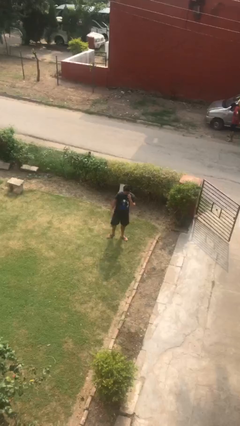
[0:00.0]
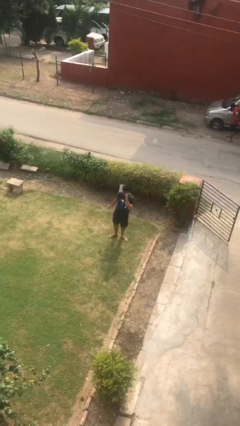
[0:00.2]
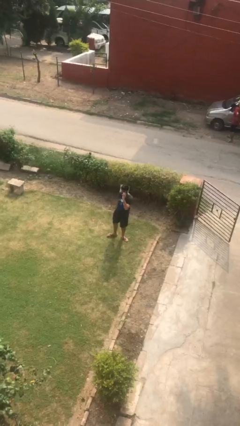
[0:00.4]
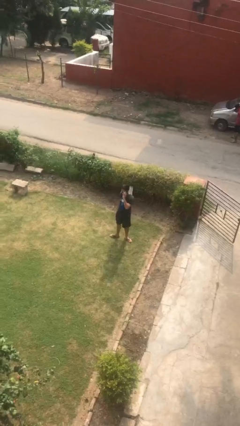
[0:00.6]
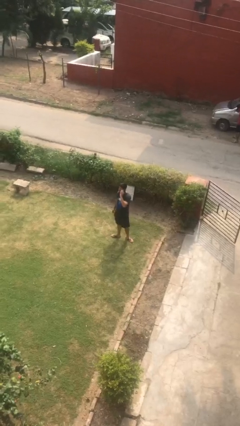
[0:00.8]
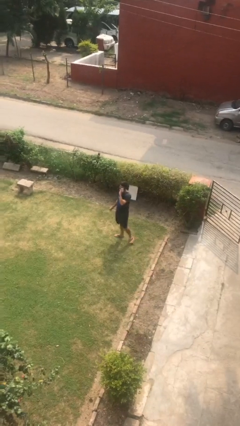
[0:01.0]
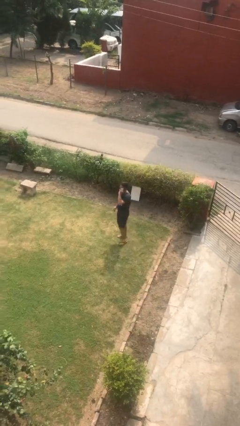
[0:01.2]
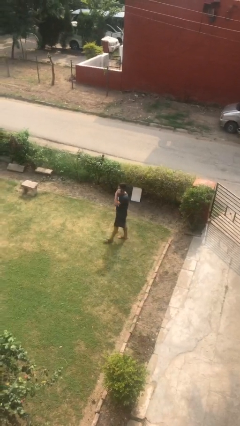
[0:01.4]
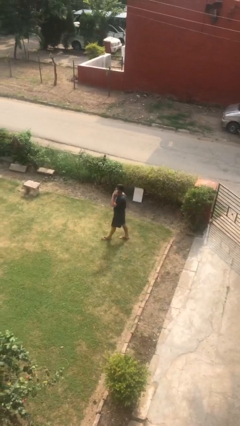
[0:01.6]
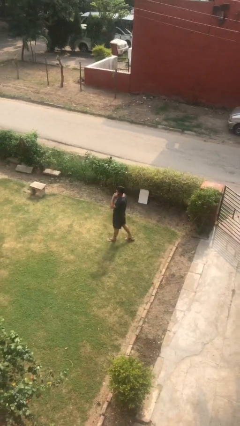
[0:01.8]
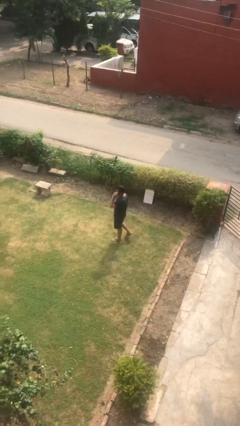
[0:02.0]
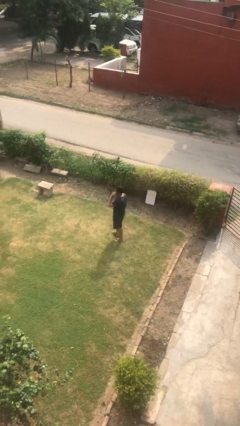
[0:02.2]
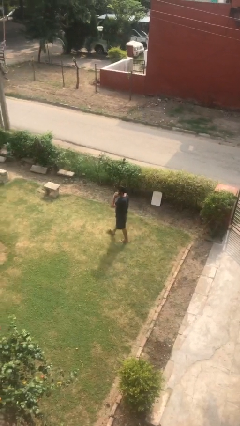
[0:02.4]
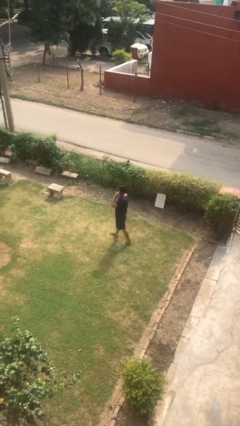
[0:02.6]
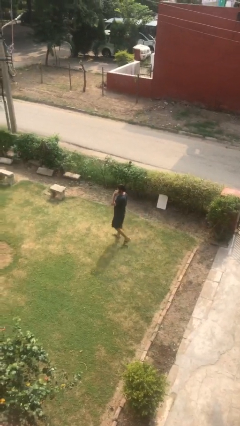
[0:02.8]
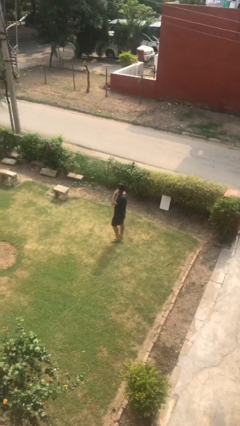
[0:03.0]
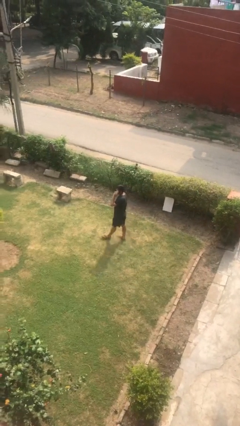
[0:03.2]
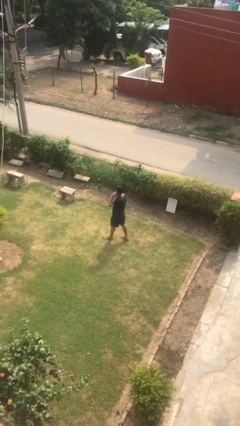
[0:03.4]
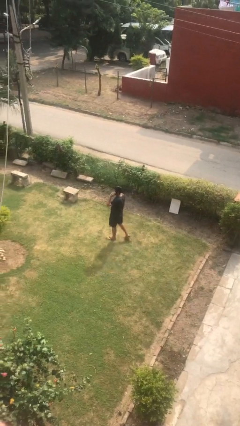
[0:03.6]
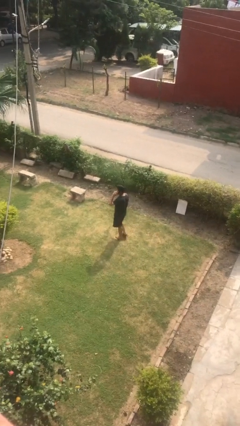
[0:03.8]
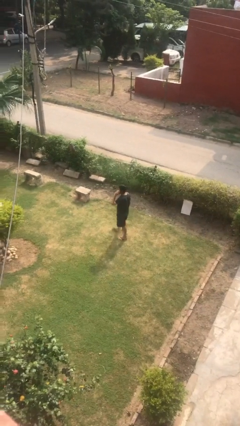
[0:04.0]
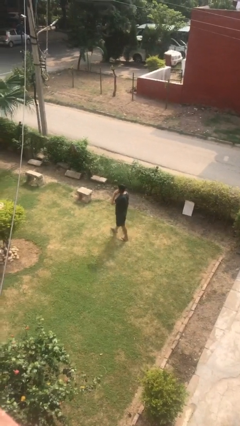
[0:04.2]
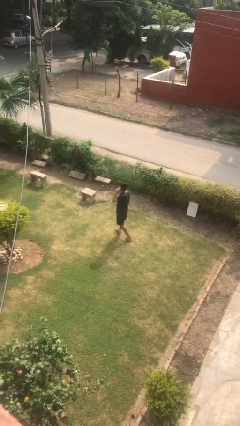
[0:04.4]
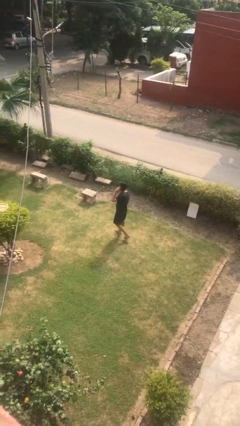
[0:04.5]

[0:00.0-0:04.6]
person talks on phone

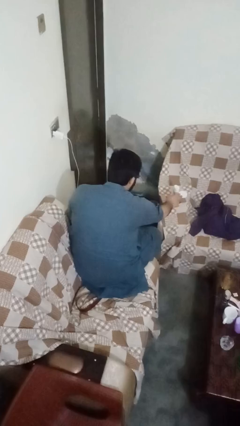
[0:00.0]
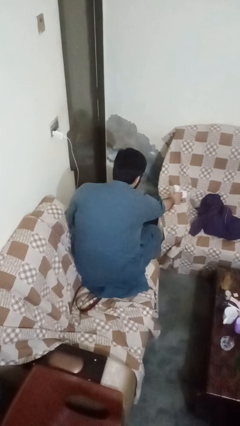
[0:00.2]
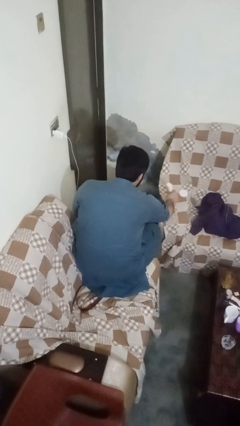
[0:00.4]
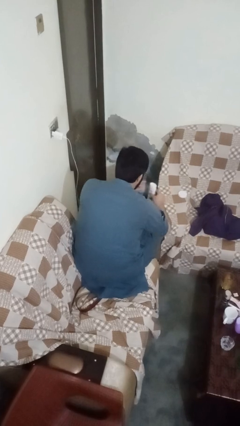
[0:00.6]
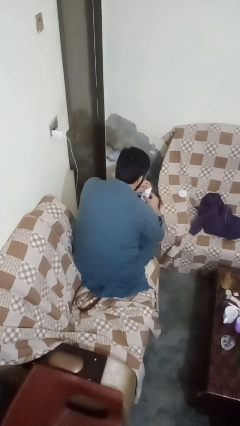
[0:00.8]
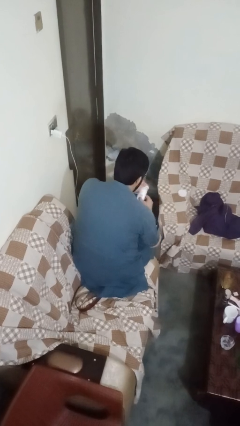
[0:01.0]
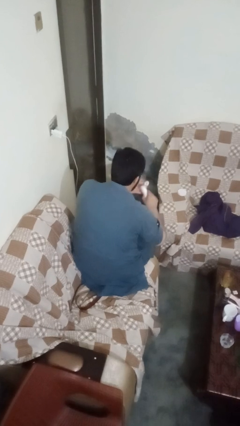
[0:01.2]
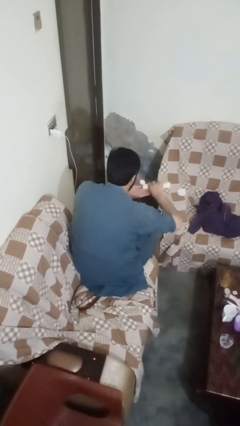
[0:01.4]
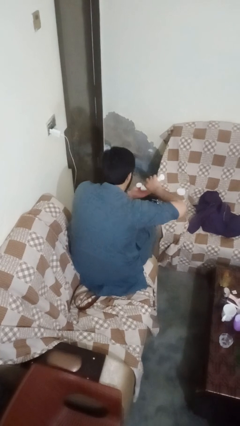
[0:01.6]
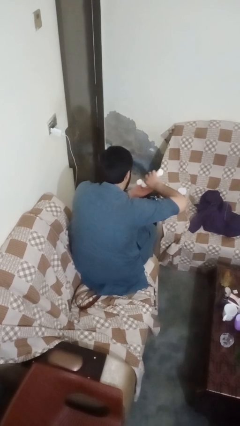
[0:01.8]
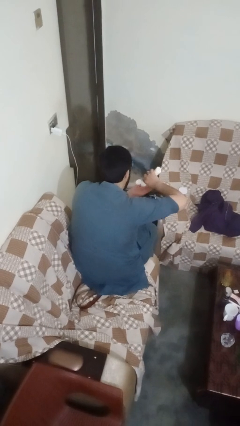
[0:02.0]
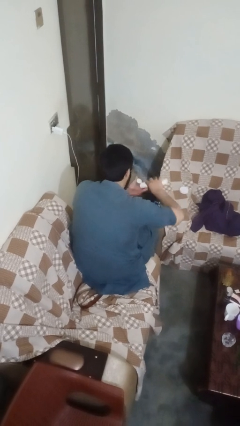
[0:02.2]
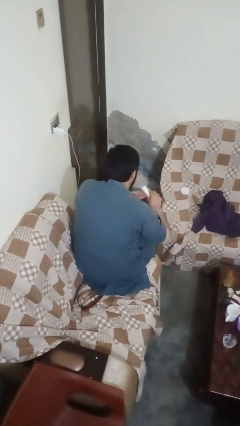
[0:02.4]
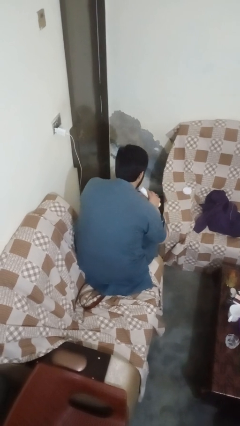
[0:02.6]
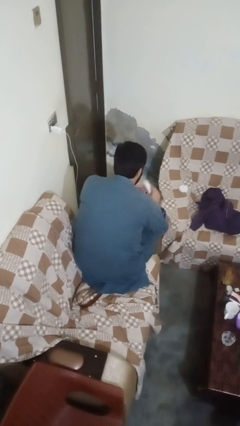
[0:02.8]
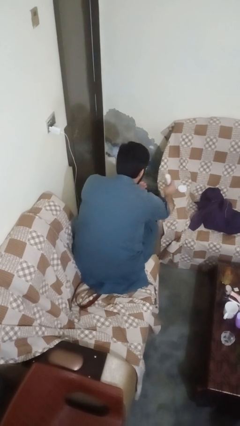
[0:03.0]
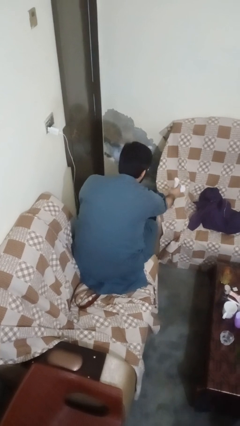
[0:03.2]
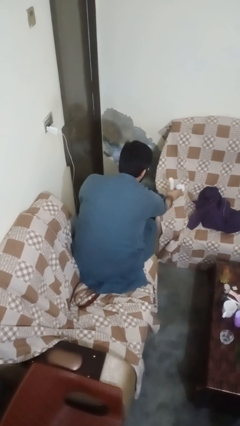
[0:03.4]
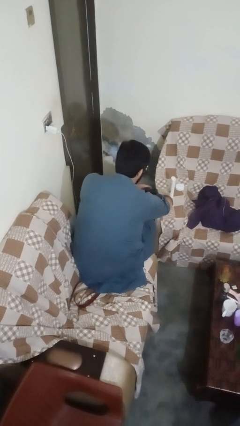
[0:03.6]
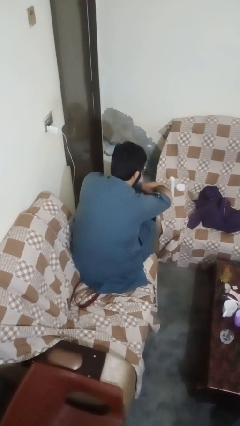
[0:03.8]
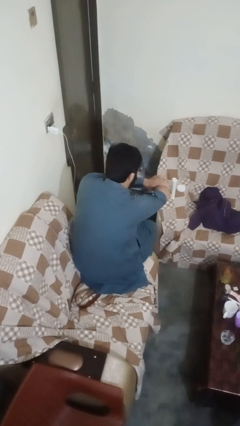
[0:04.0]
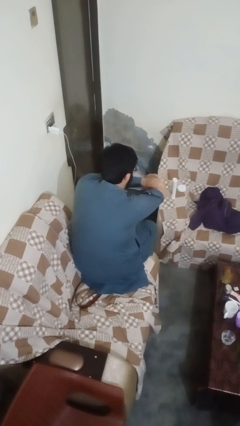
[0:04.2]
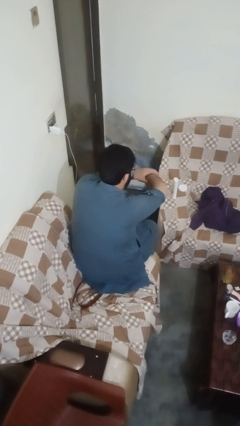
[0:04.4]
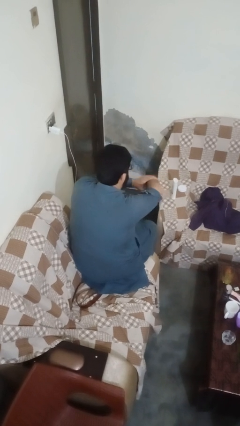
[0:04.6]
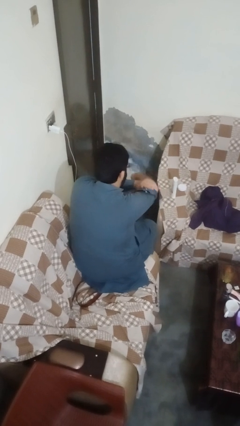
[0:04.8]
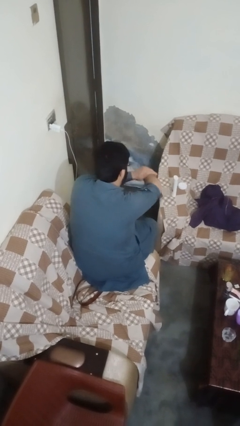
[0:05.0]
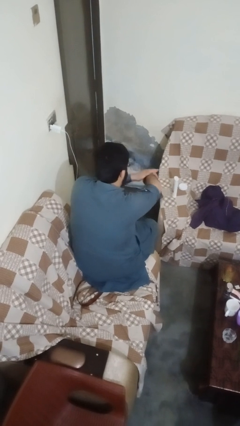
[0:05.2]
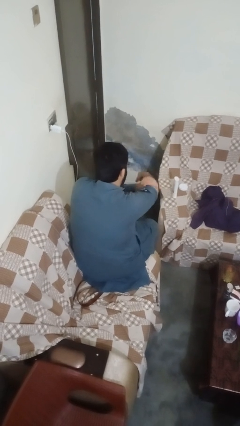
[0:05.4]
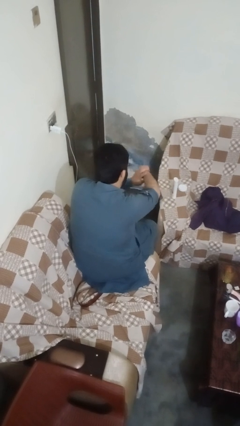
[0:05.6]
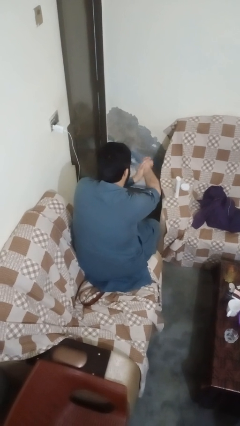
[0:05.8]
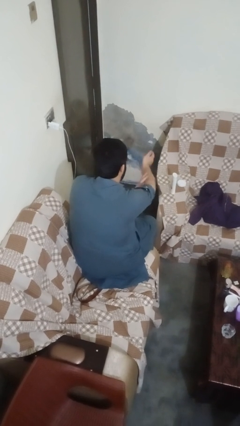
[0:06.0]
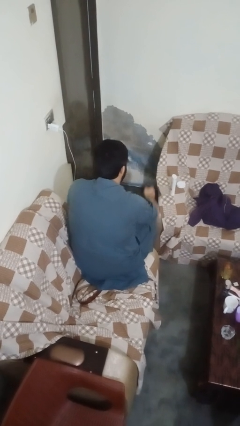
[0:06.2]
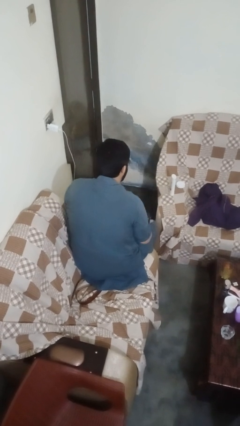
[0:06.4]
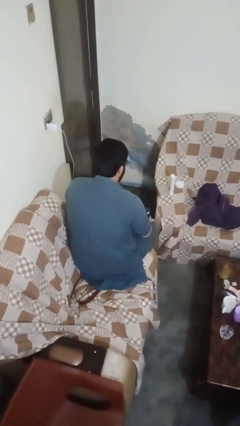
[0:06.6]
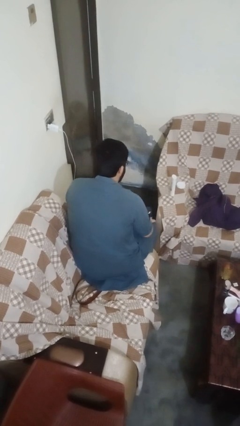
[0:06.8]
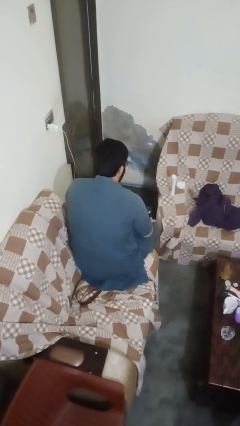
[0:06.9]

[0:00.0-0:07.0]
person applies sunscreen

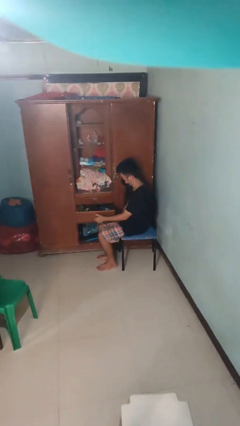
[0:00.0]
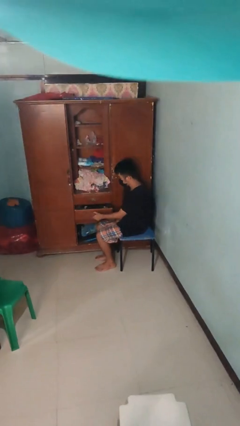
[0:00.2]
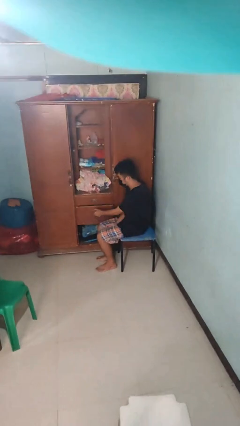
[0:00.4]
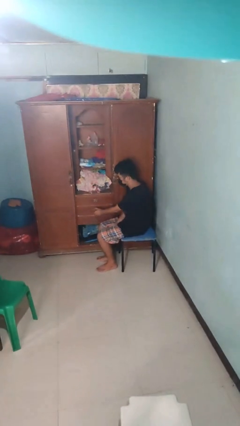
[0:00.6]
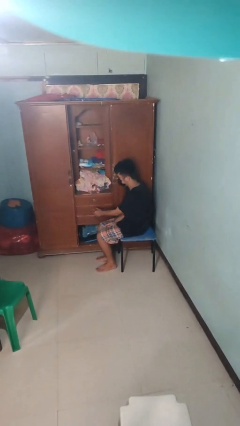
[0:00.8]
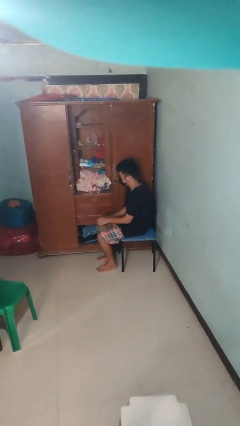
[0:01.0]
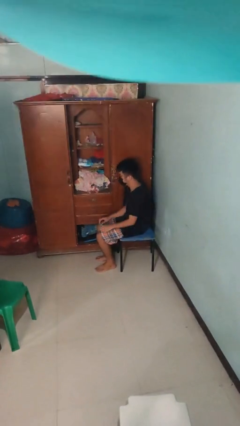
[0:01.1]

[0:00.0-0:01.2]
person closes dresser drawer

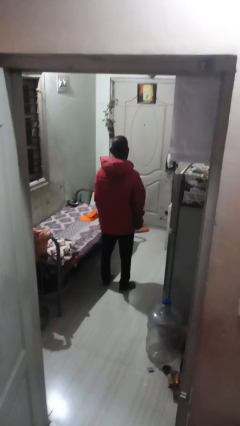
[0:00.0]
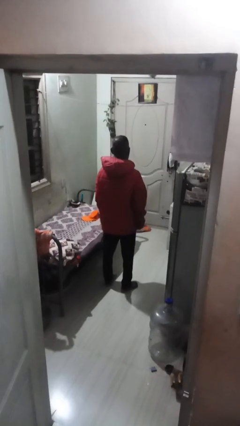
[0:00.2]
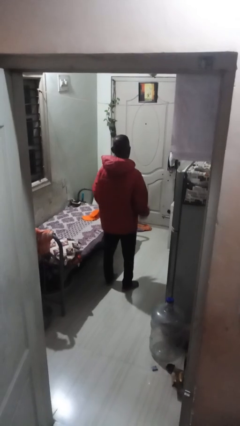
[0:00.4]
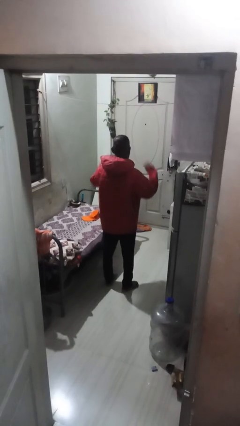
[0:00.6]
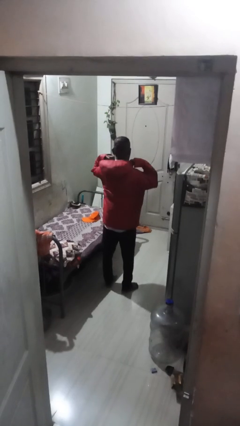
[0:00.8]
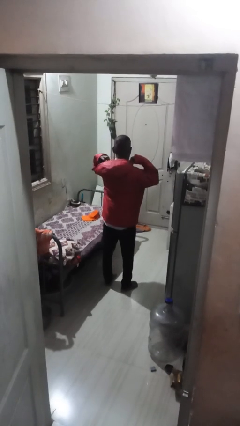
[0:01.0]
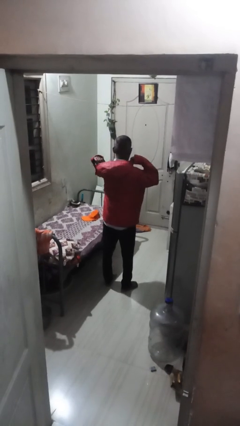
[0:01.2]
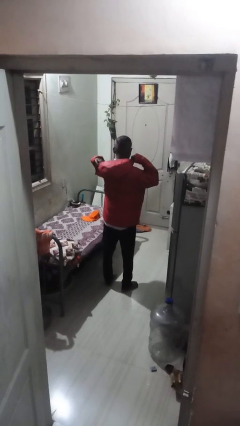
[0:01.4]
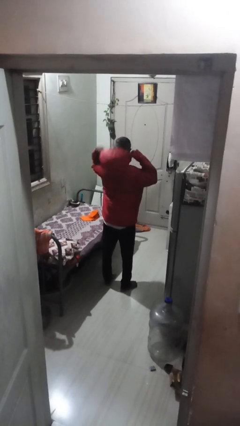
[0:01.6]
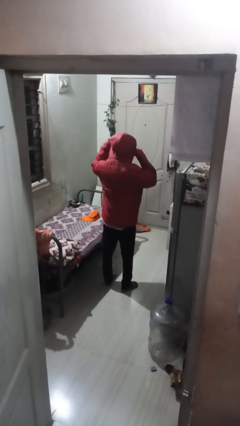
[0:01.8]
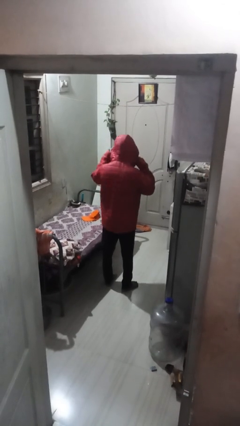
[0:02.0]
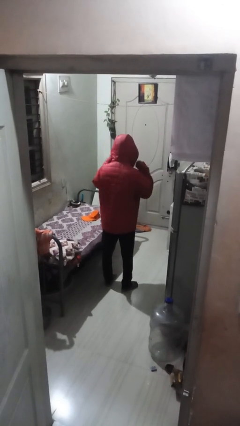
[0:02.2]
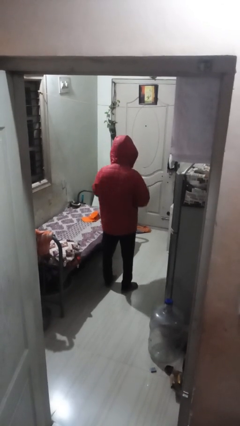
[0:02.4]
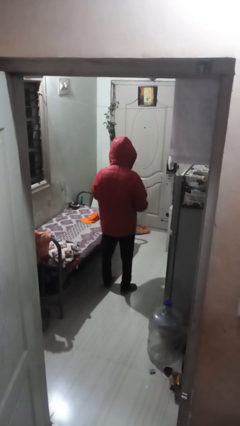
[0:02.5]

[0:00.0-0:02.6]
person puts on hoodie

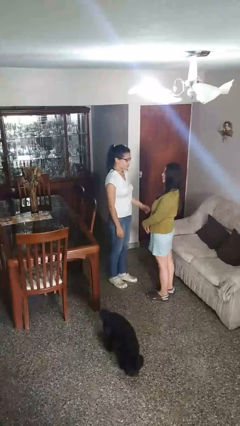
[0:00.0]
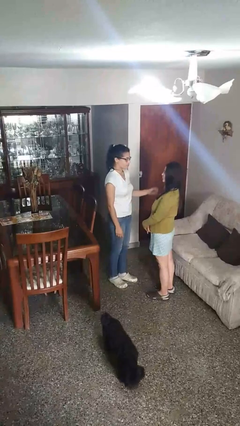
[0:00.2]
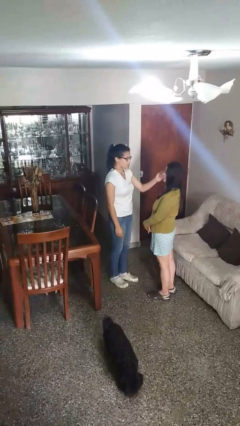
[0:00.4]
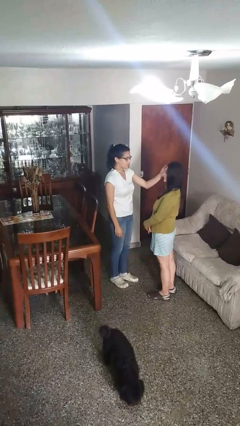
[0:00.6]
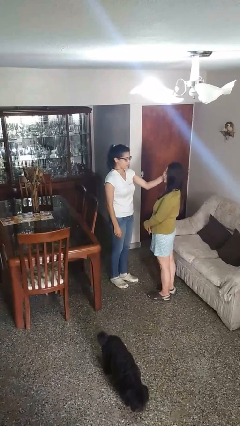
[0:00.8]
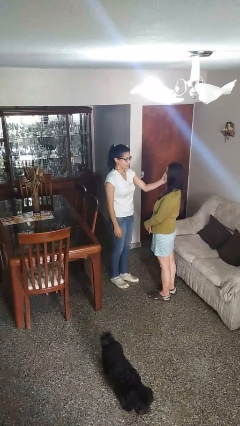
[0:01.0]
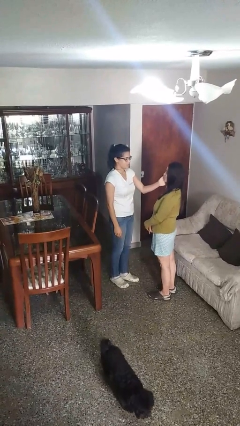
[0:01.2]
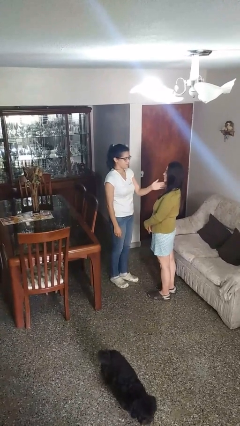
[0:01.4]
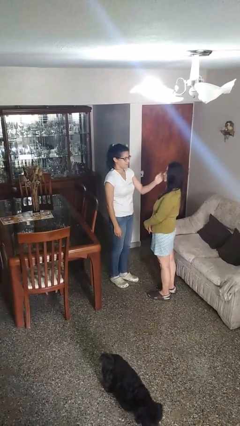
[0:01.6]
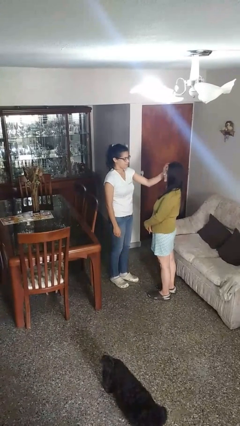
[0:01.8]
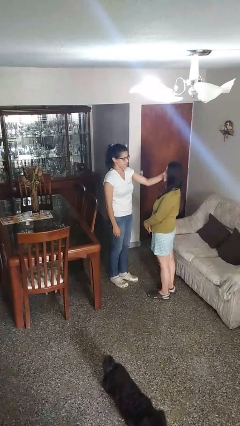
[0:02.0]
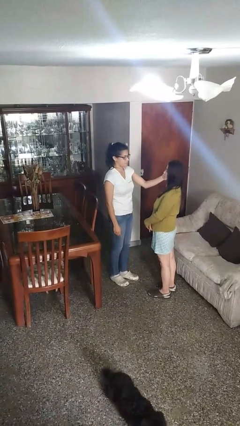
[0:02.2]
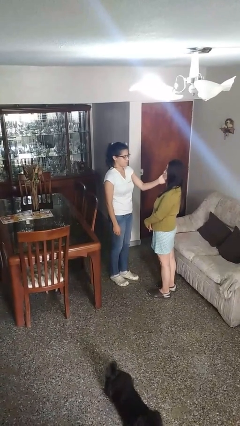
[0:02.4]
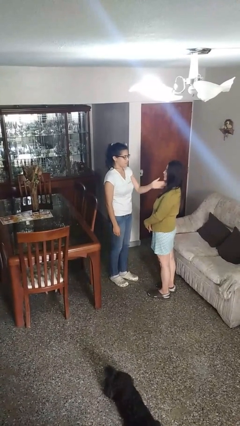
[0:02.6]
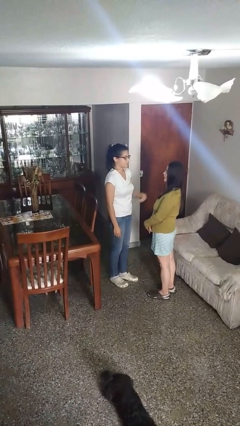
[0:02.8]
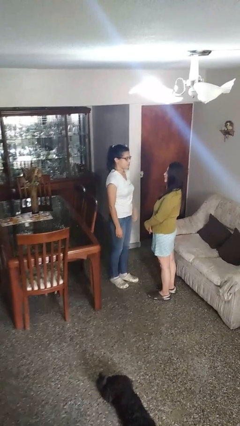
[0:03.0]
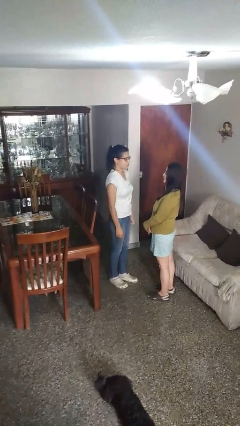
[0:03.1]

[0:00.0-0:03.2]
person touches face of person
